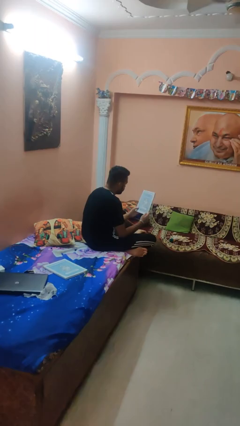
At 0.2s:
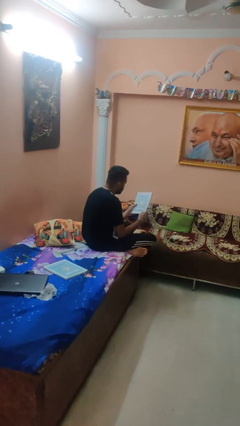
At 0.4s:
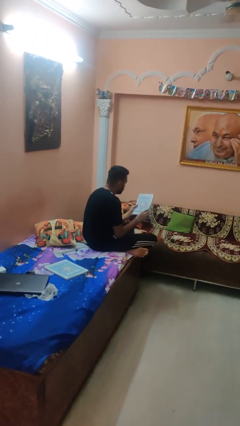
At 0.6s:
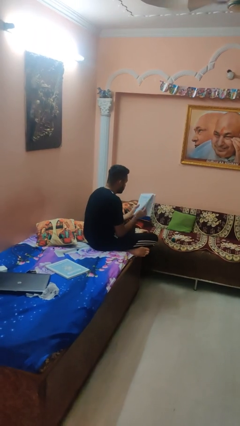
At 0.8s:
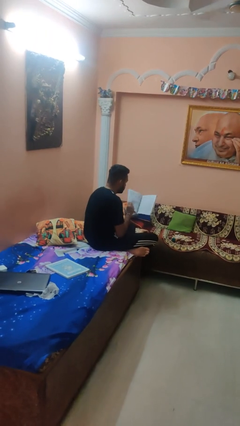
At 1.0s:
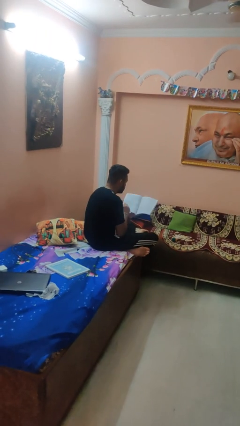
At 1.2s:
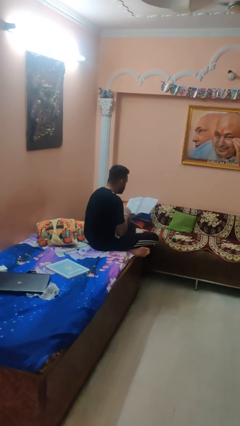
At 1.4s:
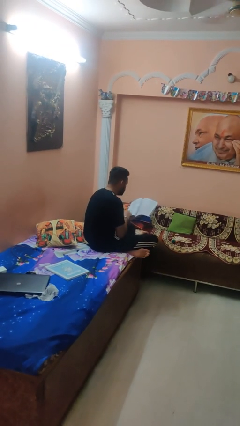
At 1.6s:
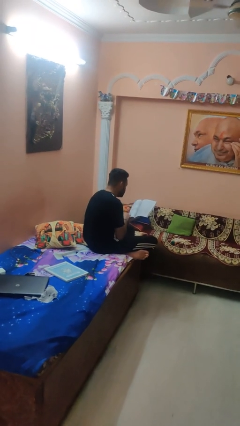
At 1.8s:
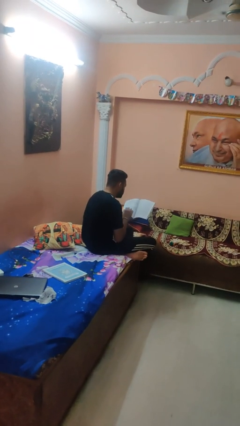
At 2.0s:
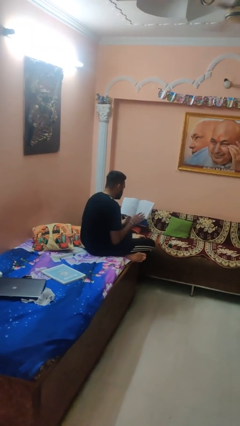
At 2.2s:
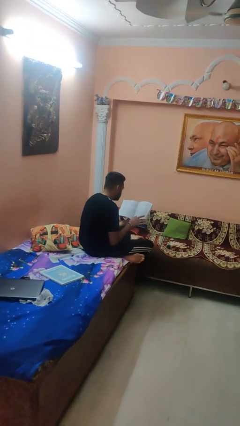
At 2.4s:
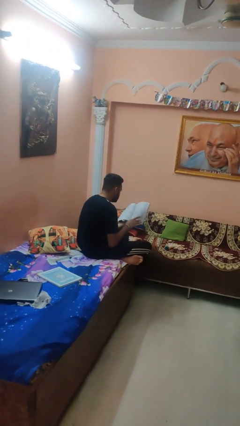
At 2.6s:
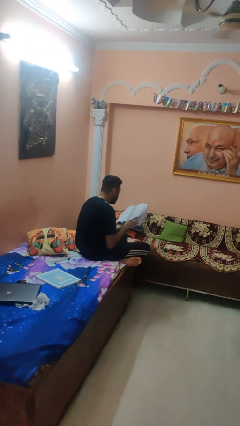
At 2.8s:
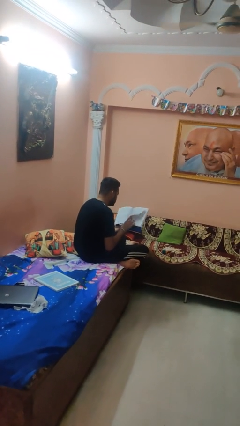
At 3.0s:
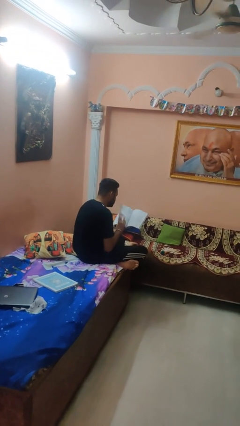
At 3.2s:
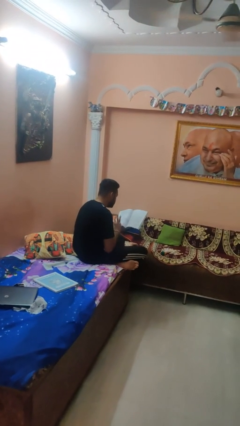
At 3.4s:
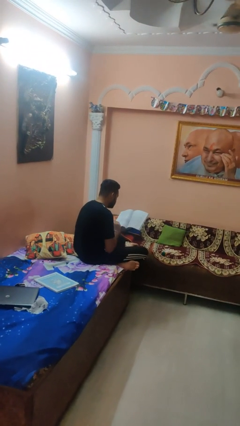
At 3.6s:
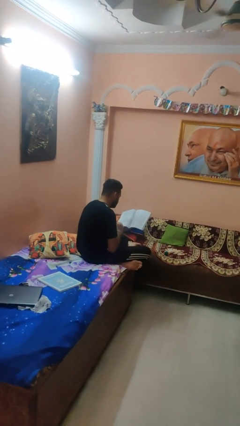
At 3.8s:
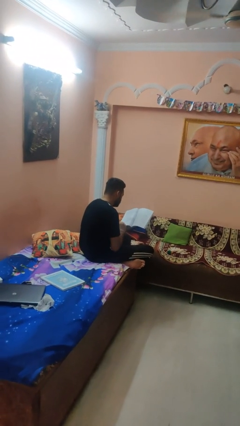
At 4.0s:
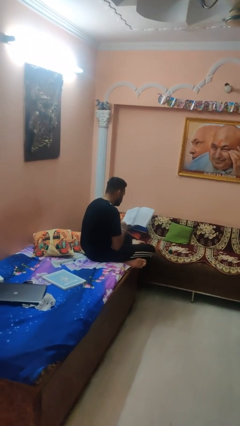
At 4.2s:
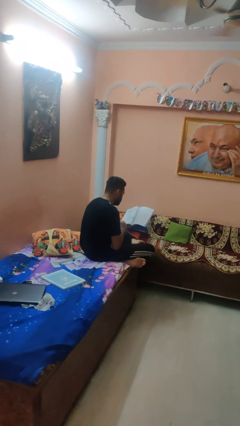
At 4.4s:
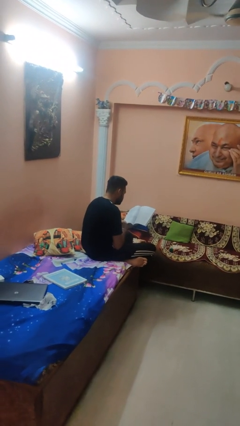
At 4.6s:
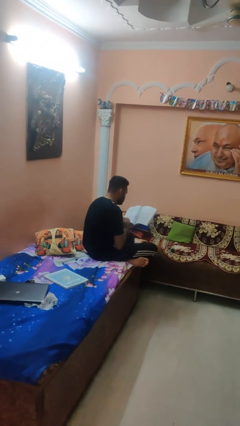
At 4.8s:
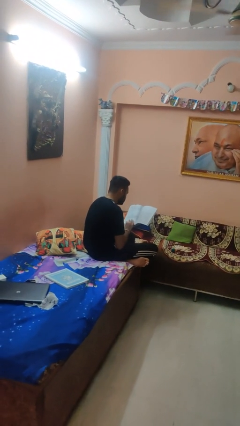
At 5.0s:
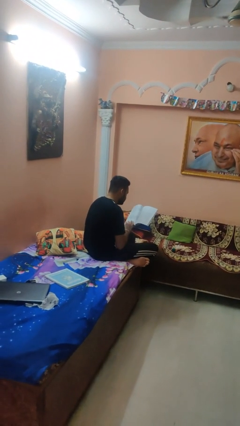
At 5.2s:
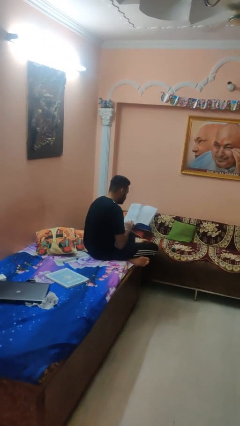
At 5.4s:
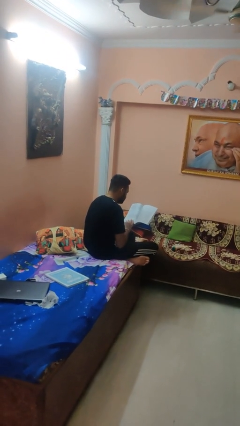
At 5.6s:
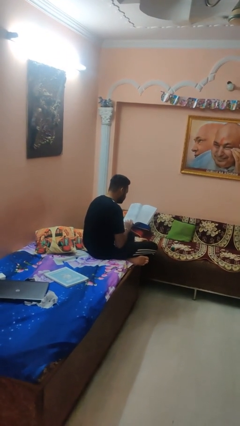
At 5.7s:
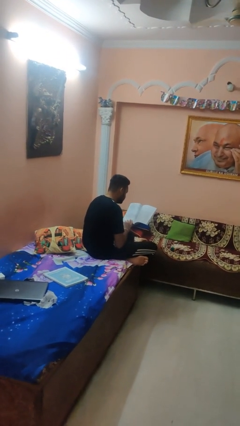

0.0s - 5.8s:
person reads magazine

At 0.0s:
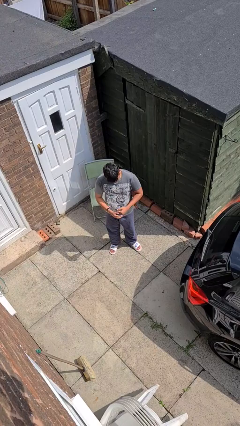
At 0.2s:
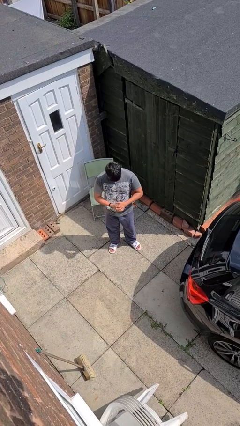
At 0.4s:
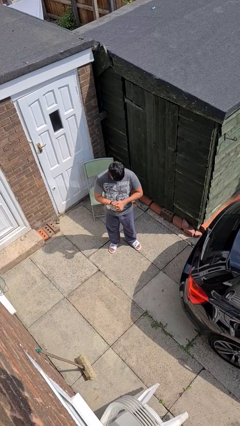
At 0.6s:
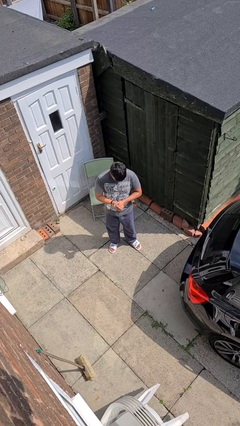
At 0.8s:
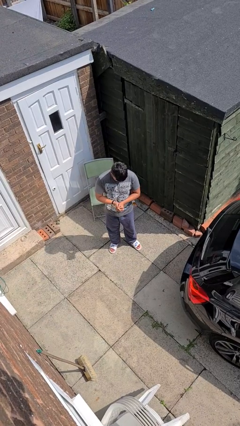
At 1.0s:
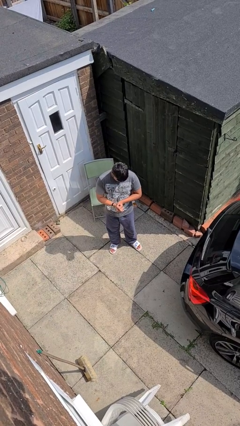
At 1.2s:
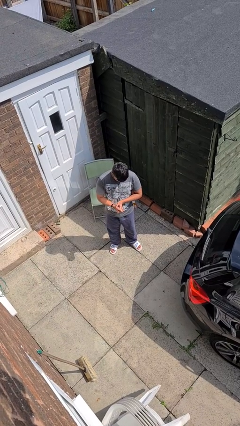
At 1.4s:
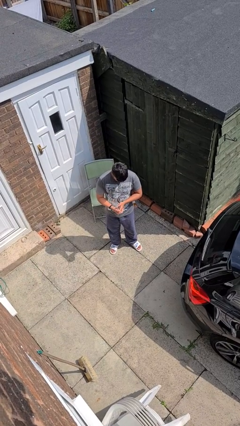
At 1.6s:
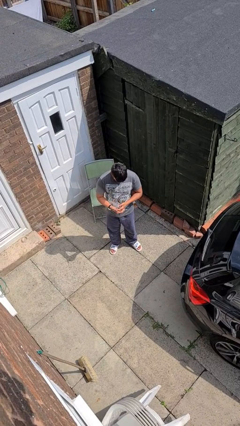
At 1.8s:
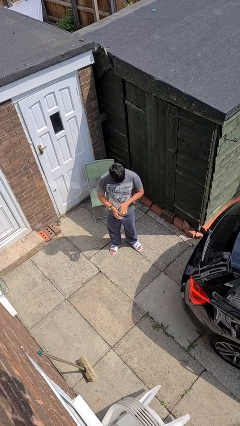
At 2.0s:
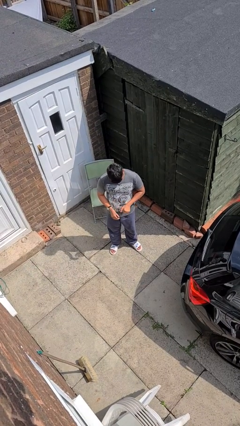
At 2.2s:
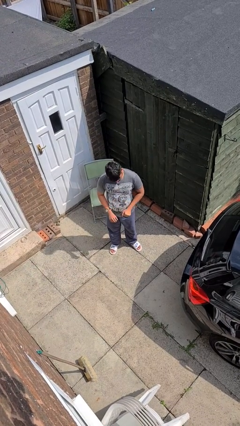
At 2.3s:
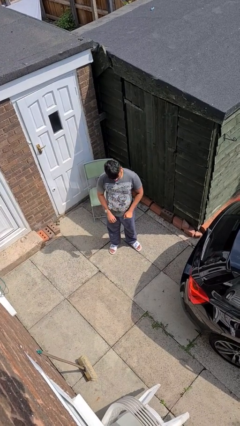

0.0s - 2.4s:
person cracks knuckles

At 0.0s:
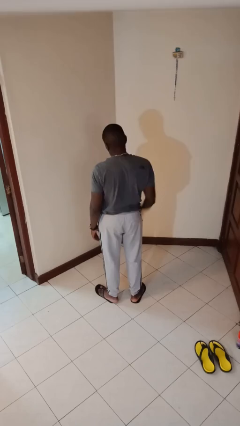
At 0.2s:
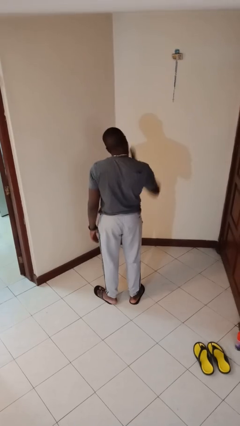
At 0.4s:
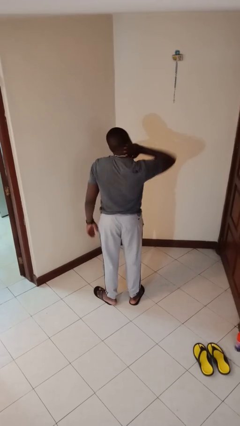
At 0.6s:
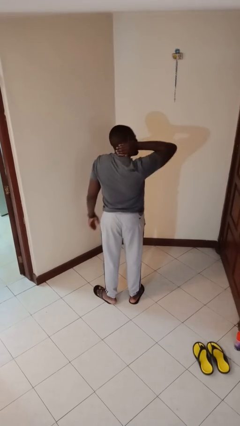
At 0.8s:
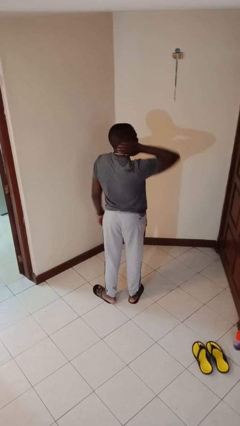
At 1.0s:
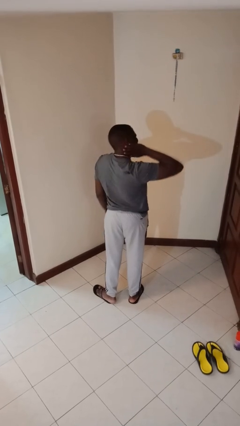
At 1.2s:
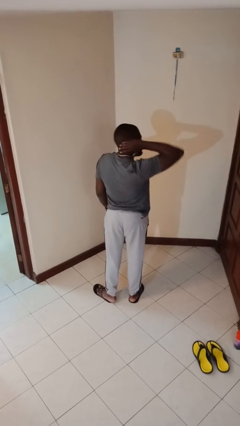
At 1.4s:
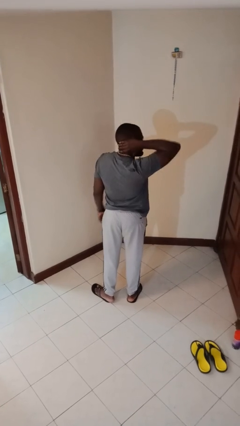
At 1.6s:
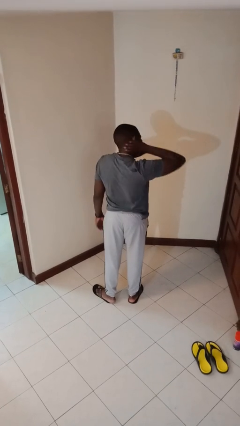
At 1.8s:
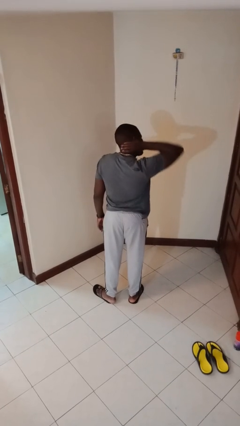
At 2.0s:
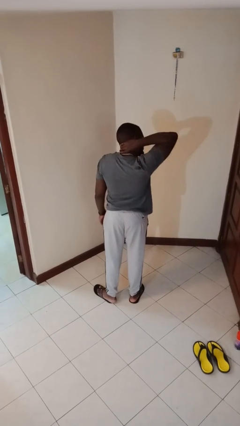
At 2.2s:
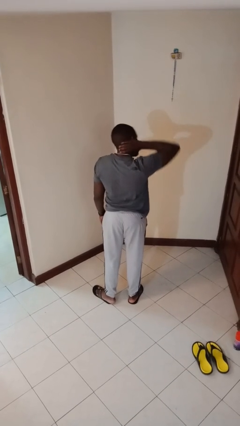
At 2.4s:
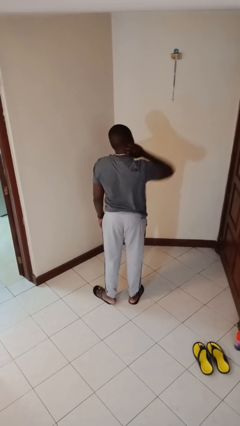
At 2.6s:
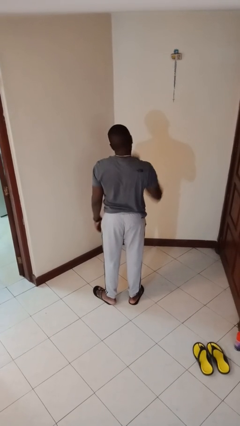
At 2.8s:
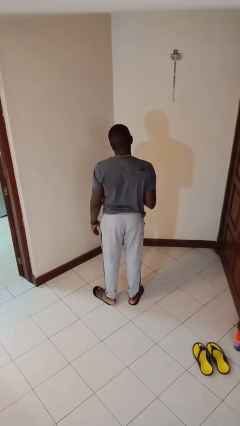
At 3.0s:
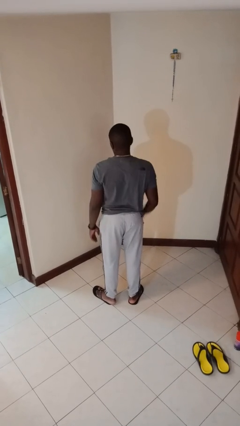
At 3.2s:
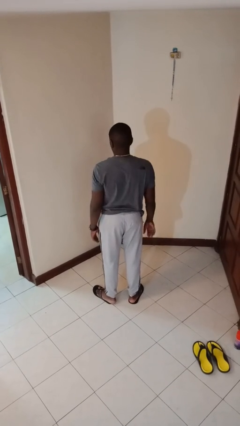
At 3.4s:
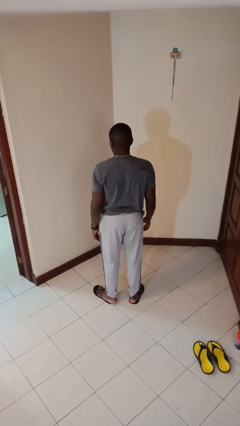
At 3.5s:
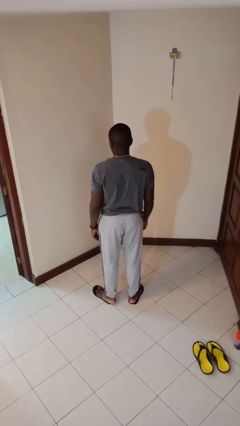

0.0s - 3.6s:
person rubs neck

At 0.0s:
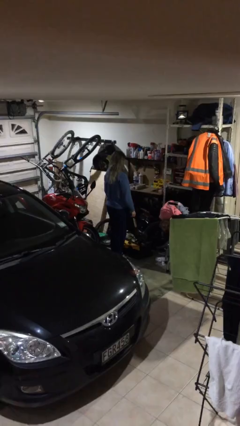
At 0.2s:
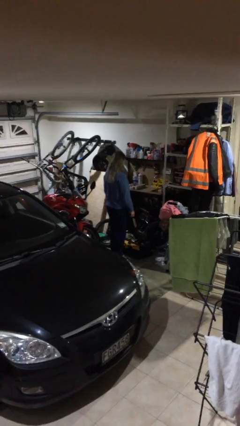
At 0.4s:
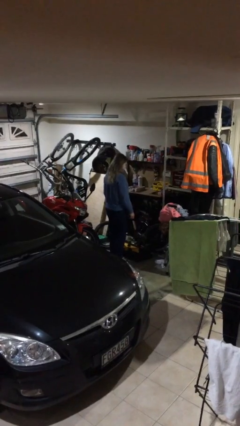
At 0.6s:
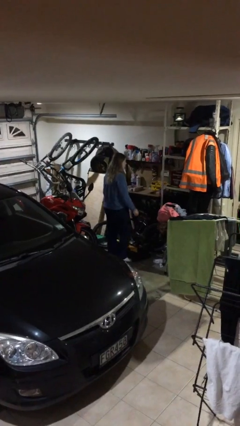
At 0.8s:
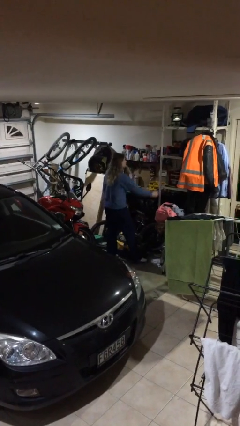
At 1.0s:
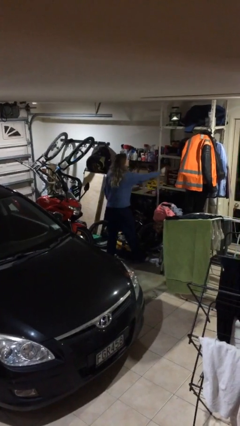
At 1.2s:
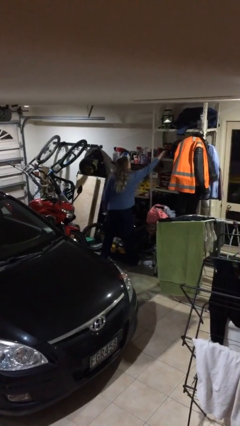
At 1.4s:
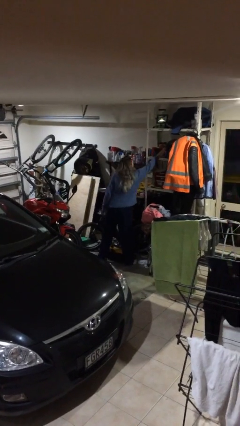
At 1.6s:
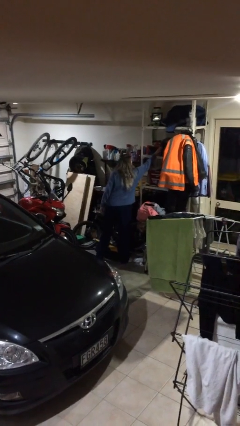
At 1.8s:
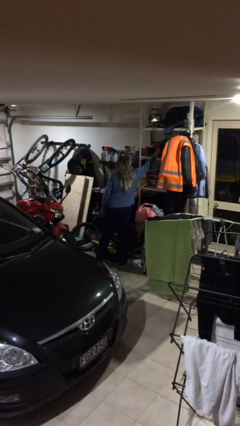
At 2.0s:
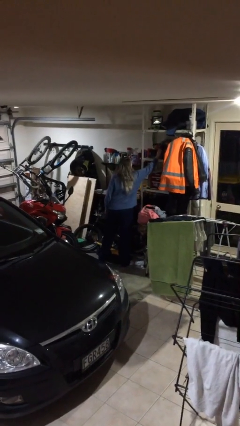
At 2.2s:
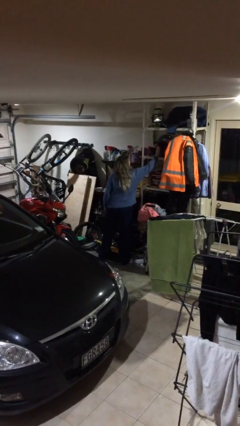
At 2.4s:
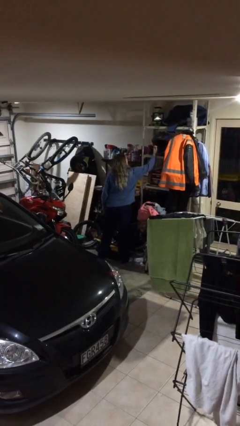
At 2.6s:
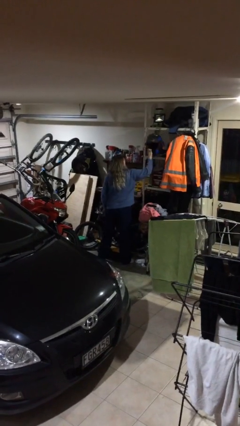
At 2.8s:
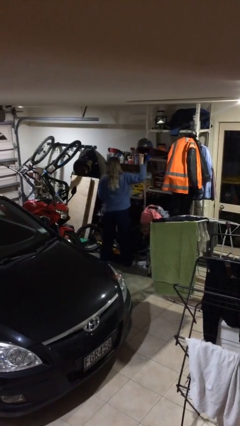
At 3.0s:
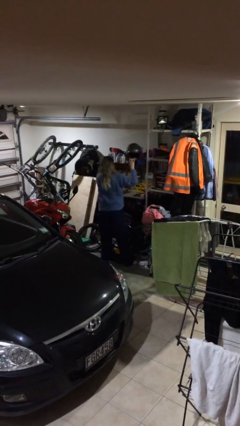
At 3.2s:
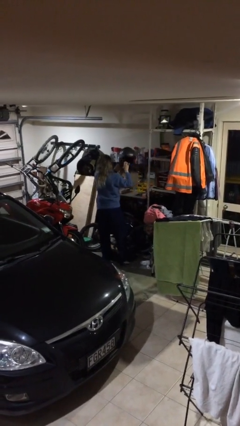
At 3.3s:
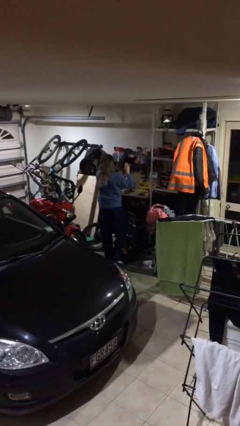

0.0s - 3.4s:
person picks up object from shelf

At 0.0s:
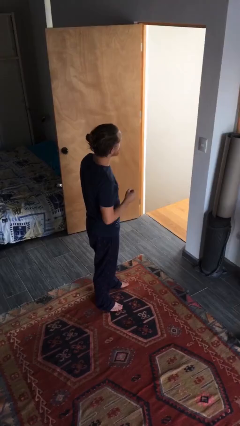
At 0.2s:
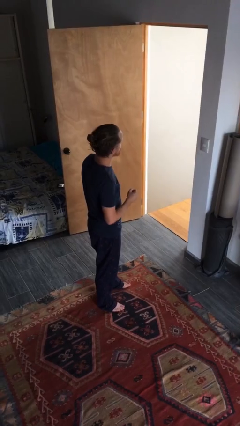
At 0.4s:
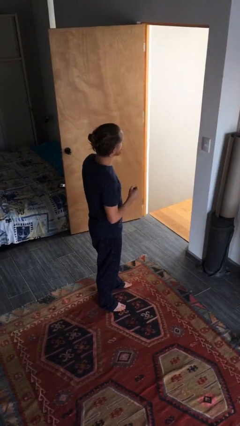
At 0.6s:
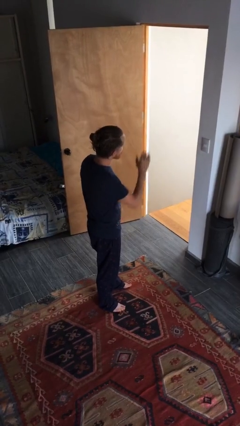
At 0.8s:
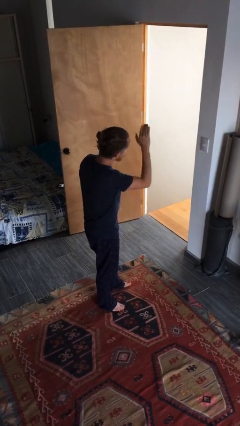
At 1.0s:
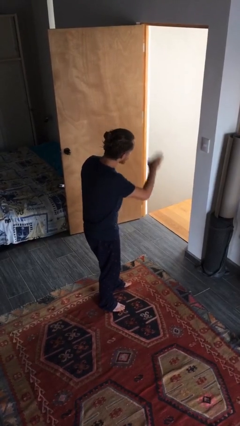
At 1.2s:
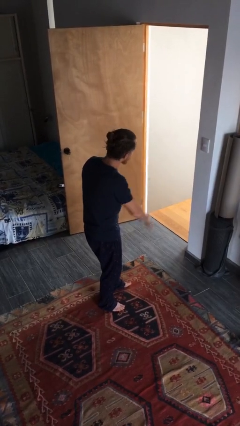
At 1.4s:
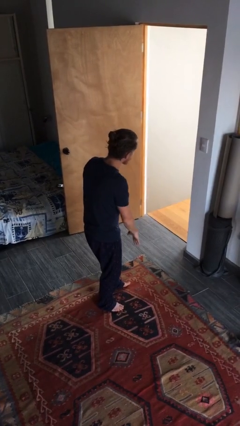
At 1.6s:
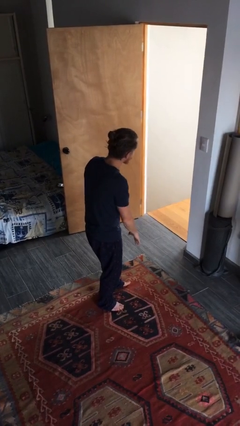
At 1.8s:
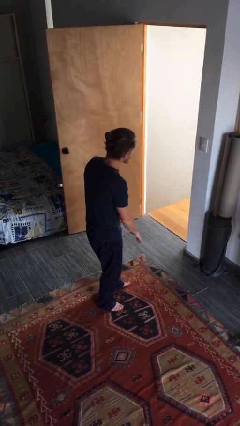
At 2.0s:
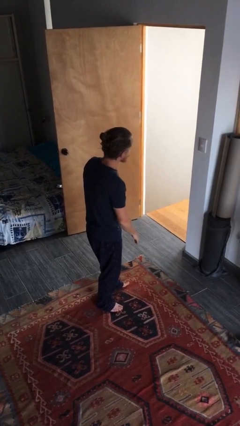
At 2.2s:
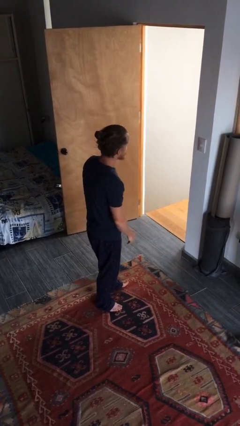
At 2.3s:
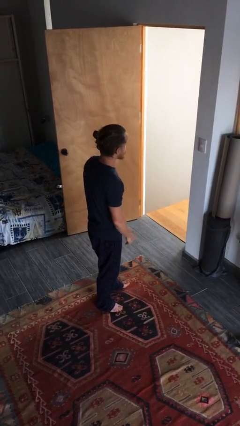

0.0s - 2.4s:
person gestures swipe down
